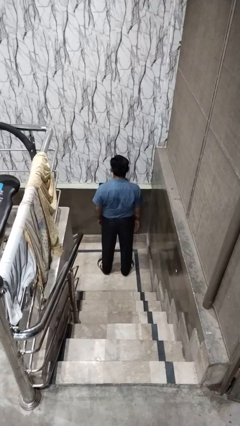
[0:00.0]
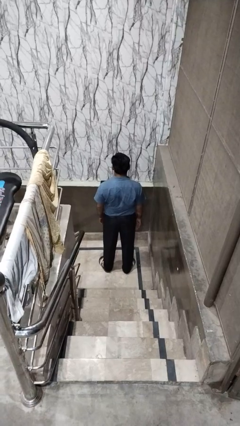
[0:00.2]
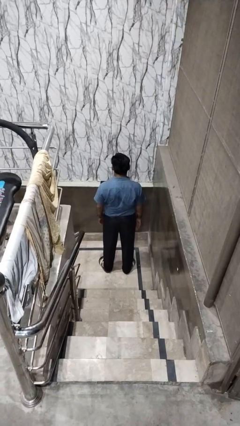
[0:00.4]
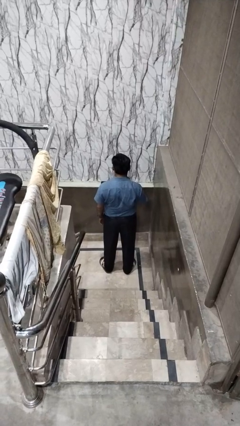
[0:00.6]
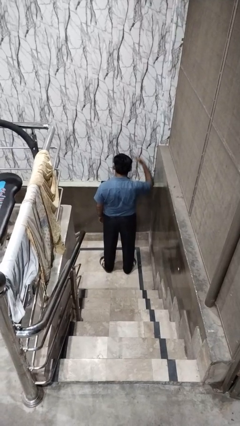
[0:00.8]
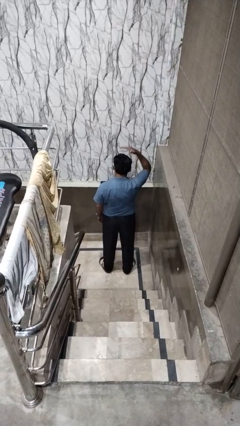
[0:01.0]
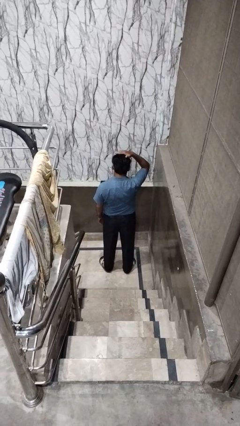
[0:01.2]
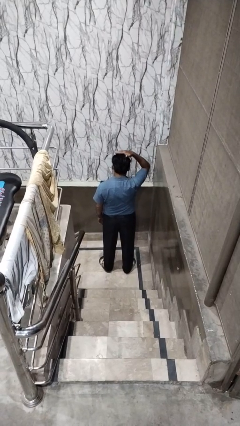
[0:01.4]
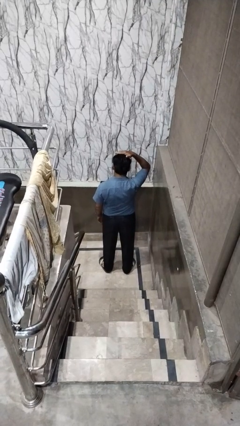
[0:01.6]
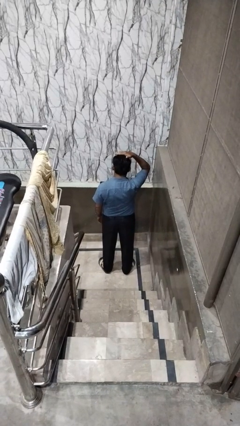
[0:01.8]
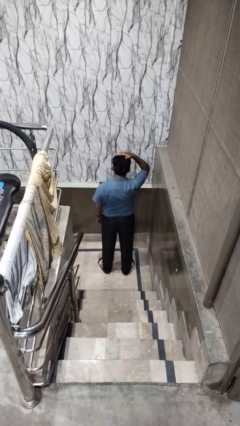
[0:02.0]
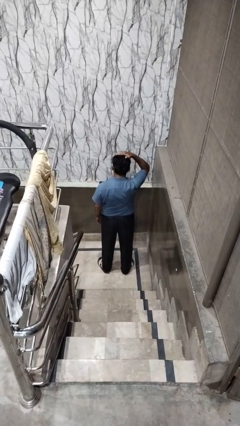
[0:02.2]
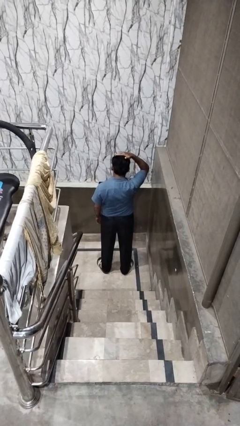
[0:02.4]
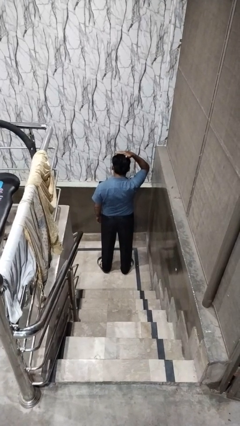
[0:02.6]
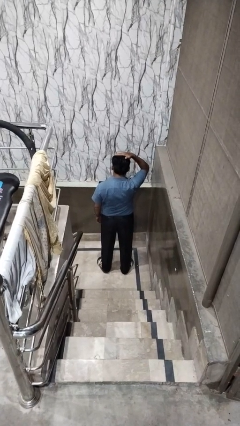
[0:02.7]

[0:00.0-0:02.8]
person pats head

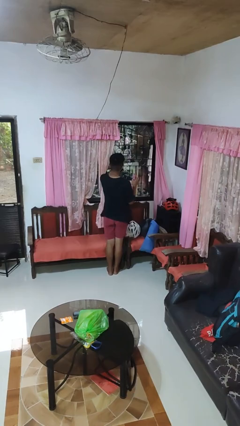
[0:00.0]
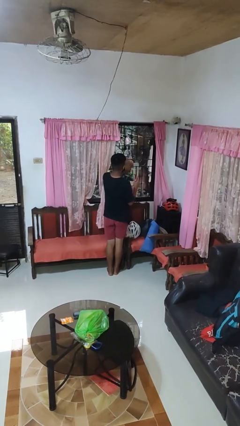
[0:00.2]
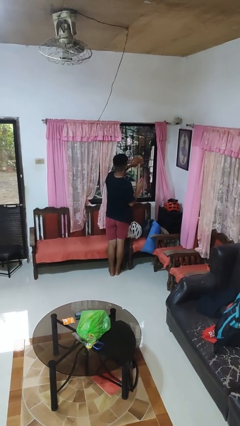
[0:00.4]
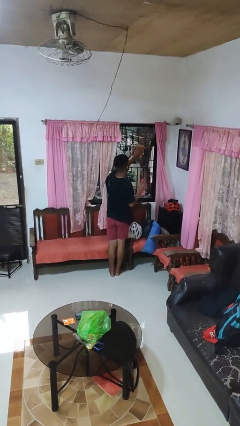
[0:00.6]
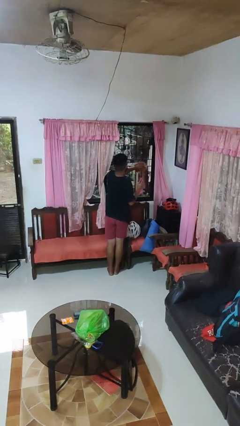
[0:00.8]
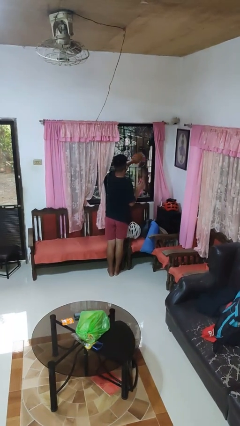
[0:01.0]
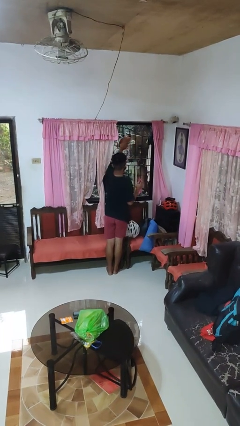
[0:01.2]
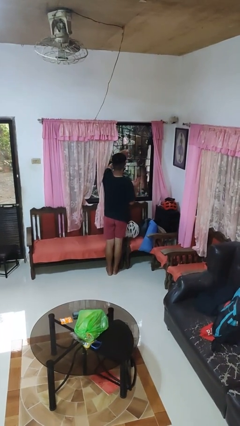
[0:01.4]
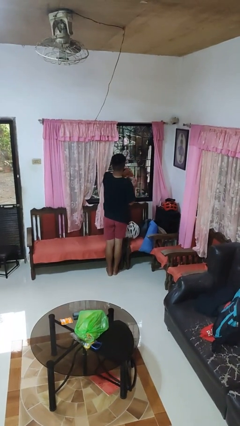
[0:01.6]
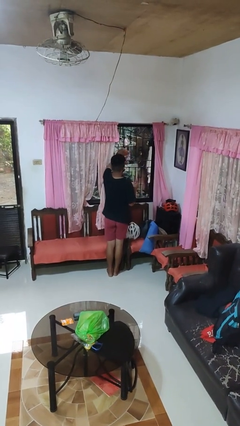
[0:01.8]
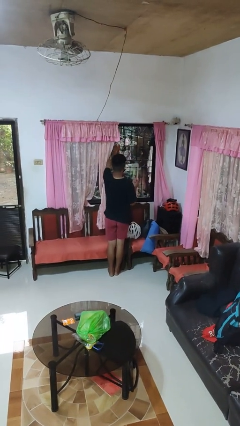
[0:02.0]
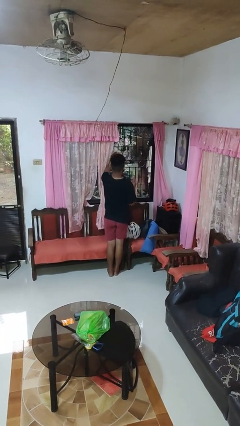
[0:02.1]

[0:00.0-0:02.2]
person washes window

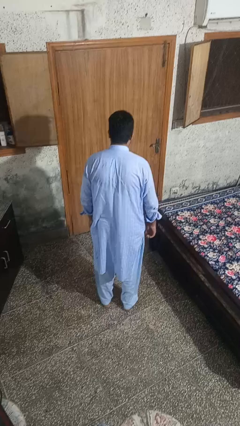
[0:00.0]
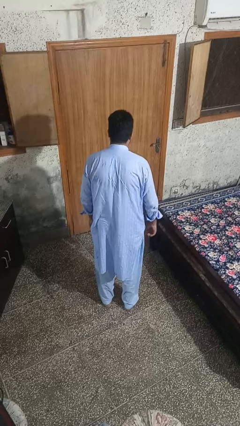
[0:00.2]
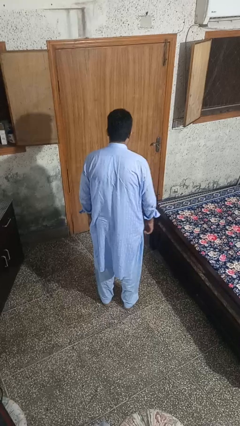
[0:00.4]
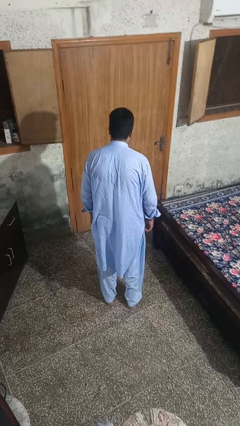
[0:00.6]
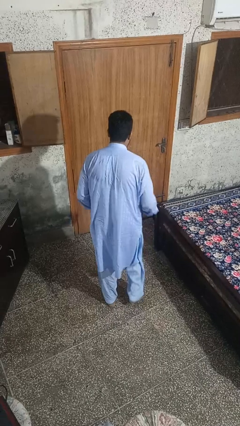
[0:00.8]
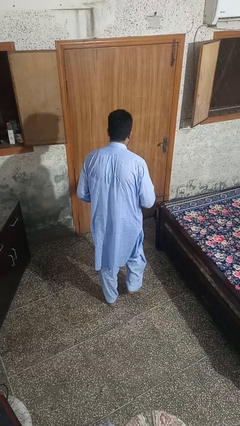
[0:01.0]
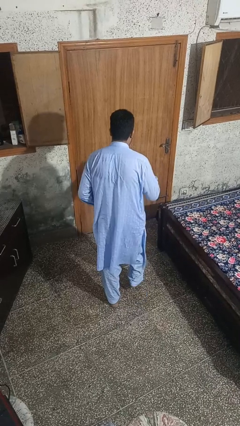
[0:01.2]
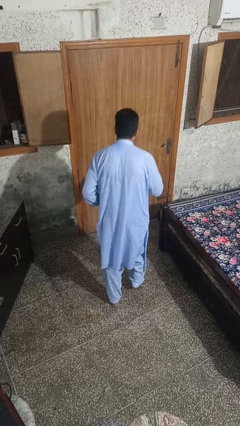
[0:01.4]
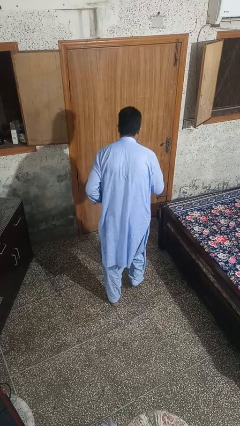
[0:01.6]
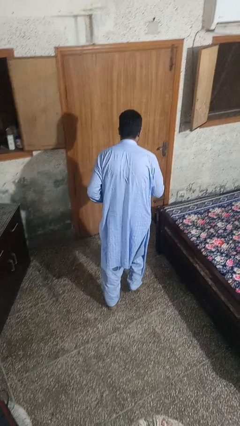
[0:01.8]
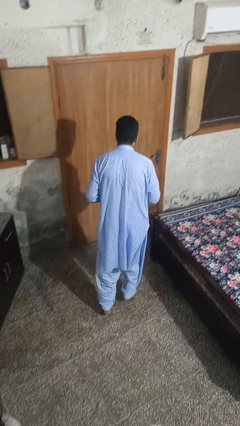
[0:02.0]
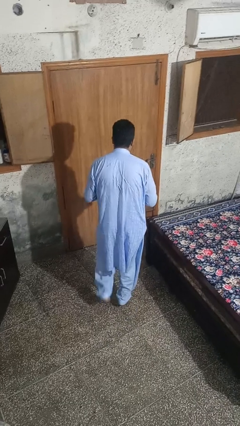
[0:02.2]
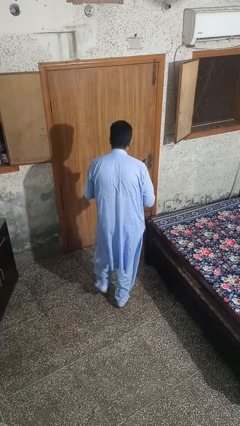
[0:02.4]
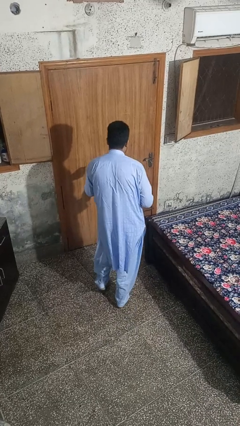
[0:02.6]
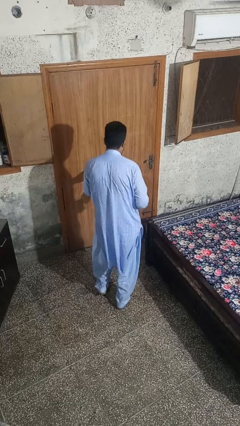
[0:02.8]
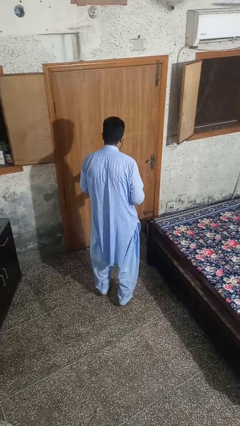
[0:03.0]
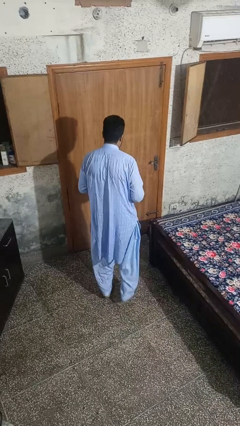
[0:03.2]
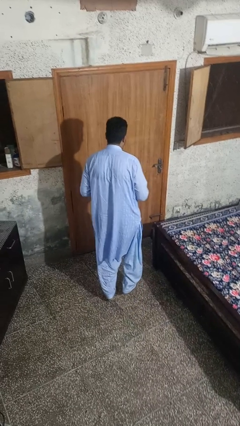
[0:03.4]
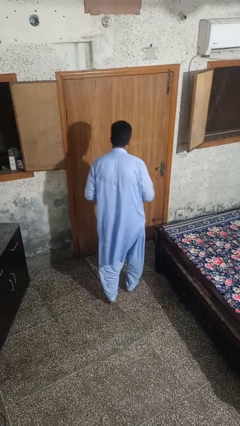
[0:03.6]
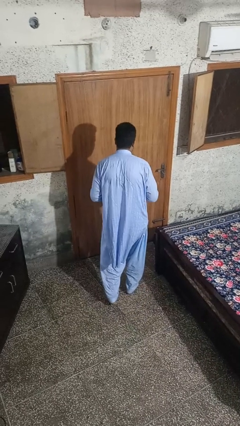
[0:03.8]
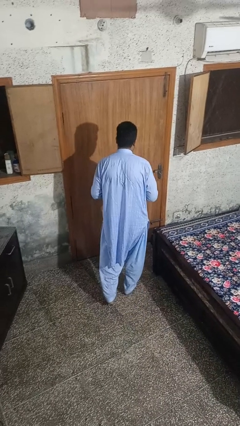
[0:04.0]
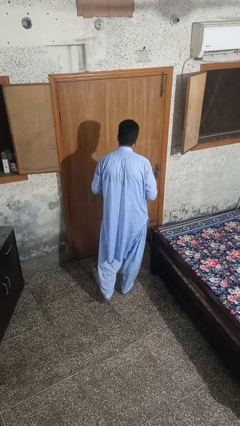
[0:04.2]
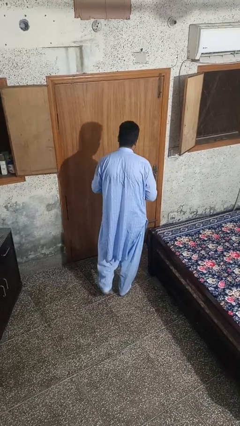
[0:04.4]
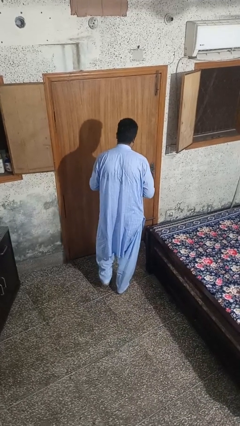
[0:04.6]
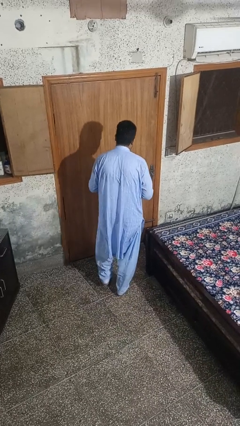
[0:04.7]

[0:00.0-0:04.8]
person walks tiptoe

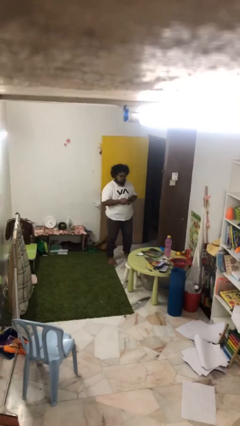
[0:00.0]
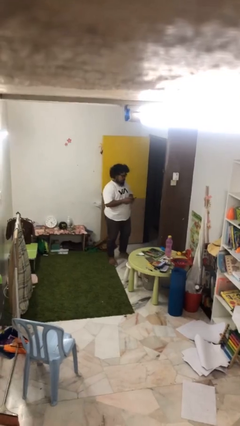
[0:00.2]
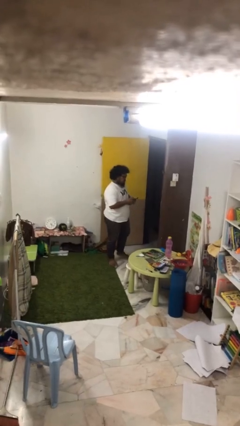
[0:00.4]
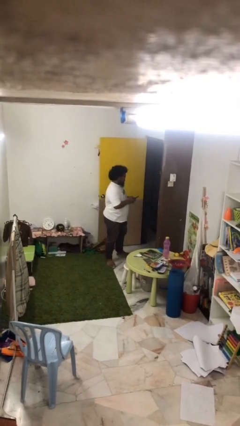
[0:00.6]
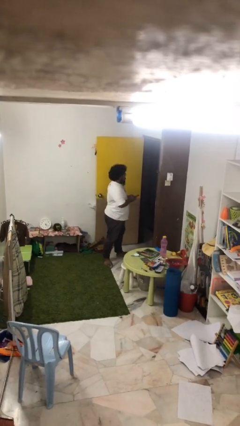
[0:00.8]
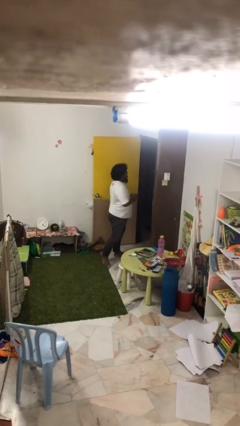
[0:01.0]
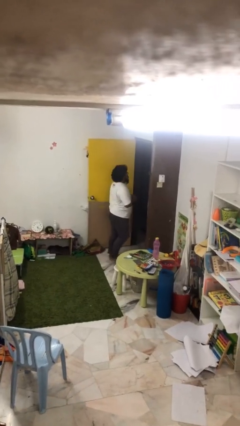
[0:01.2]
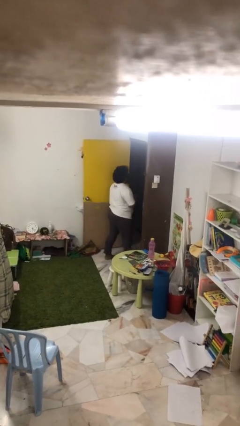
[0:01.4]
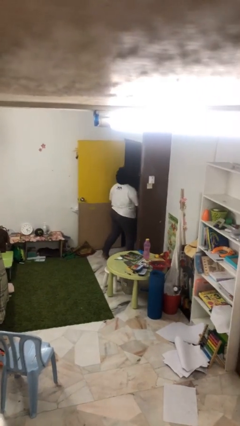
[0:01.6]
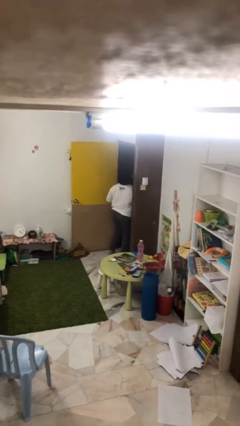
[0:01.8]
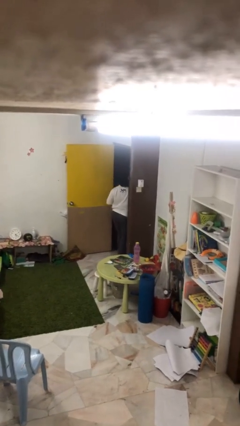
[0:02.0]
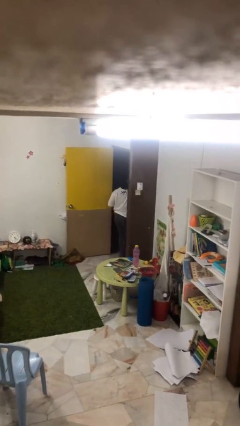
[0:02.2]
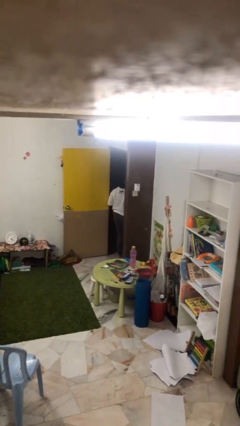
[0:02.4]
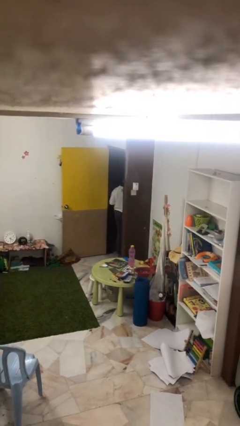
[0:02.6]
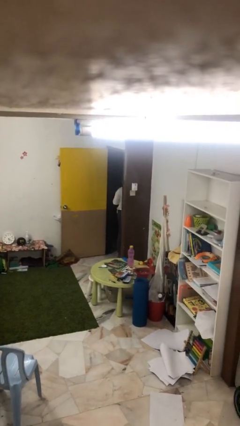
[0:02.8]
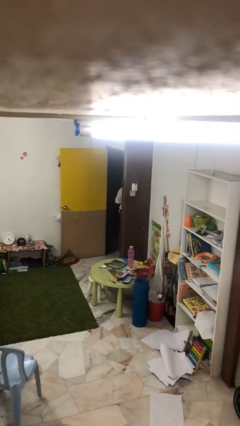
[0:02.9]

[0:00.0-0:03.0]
person exits scene through structure

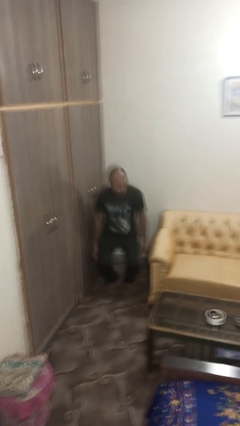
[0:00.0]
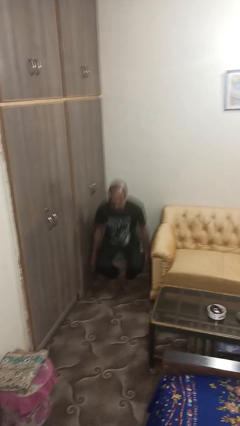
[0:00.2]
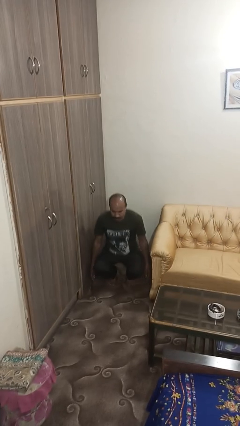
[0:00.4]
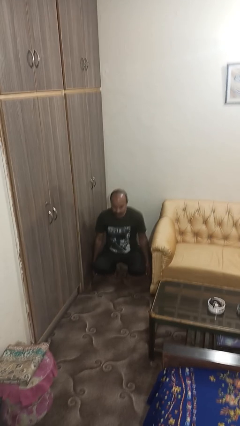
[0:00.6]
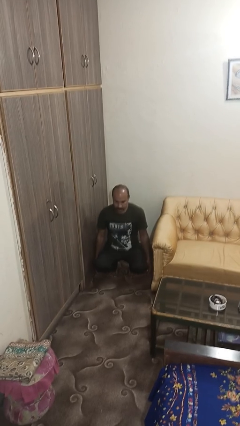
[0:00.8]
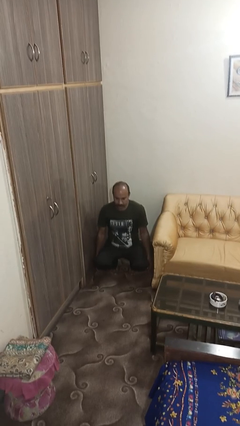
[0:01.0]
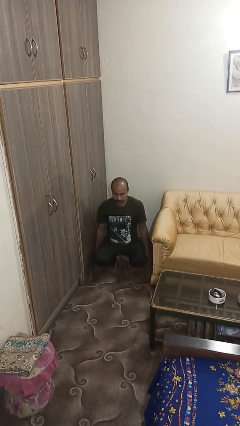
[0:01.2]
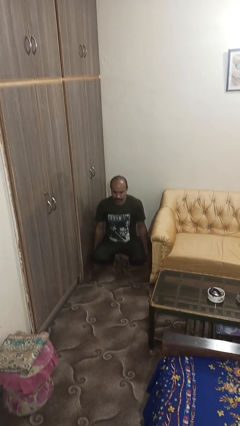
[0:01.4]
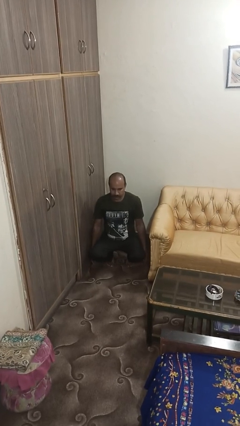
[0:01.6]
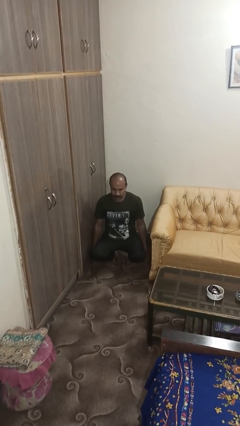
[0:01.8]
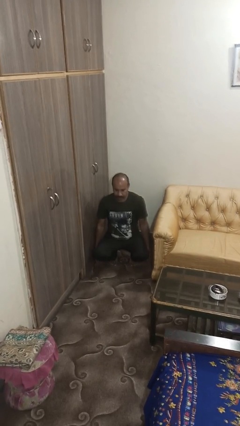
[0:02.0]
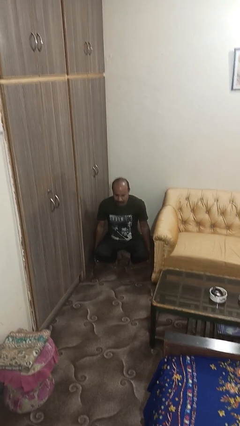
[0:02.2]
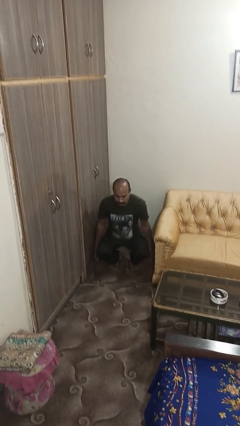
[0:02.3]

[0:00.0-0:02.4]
person squats

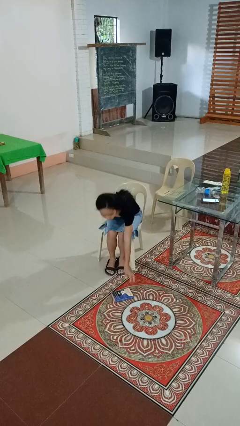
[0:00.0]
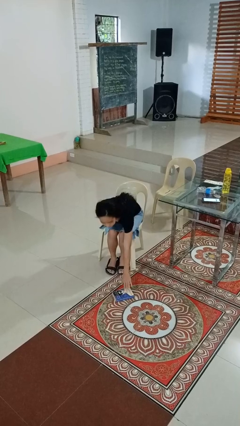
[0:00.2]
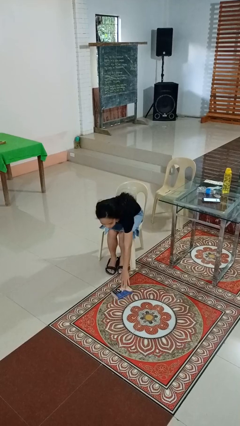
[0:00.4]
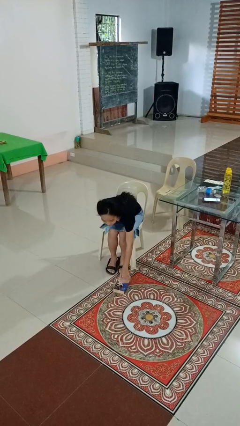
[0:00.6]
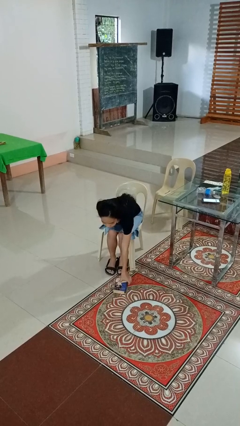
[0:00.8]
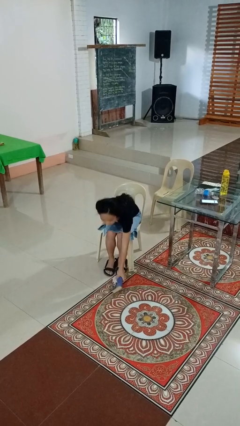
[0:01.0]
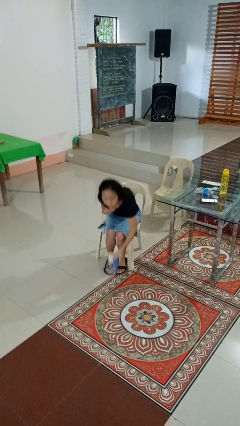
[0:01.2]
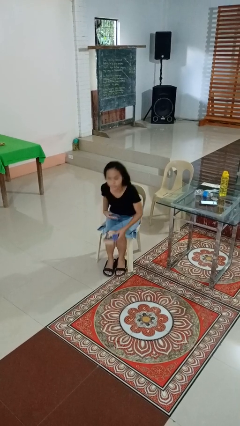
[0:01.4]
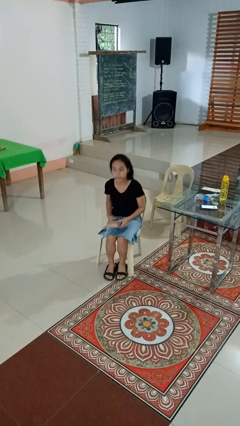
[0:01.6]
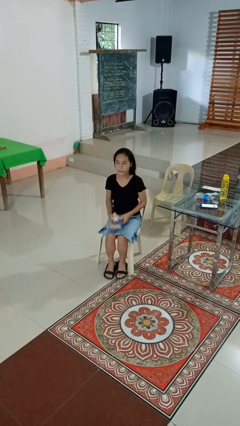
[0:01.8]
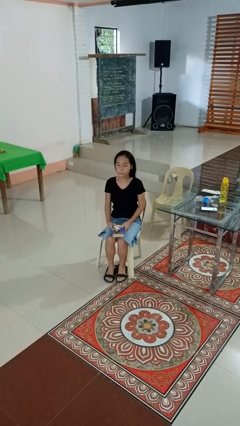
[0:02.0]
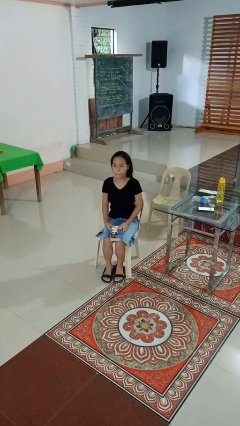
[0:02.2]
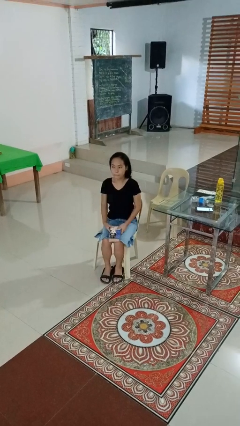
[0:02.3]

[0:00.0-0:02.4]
person picks up object from floor
